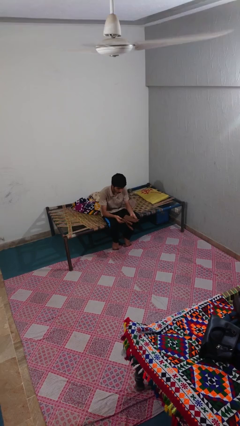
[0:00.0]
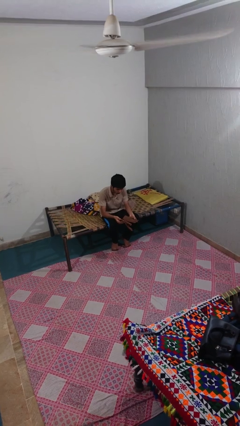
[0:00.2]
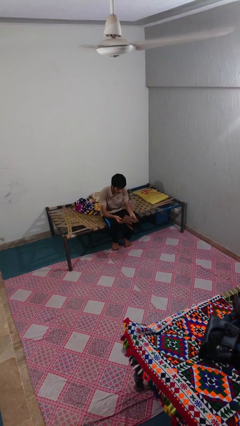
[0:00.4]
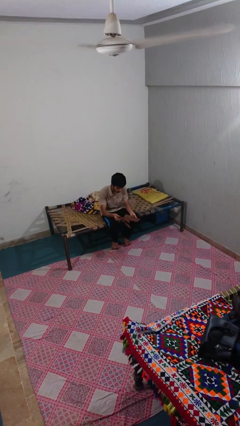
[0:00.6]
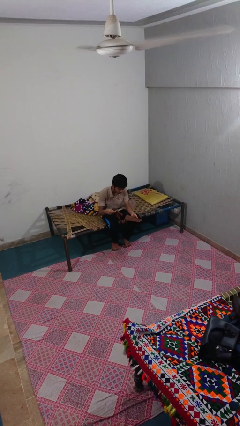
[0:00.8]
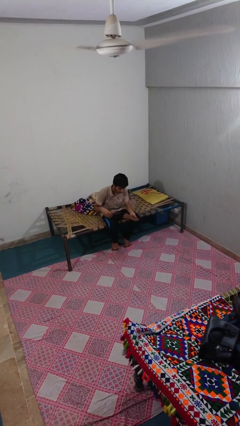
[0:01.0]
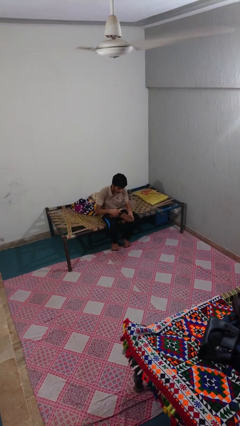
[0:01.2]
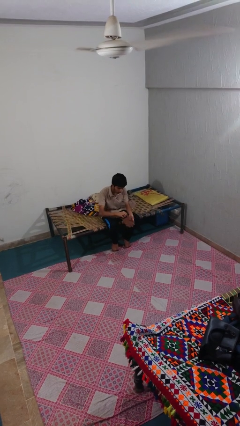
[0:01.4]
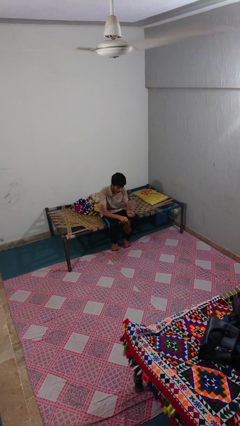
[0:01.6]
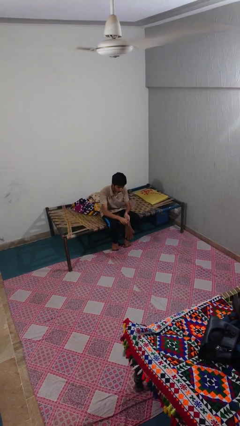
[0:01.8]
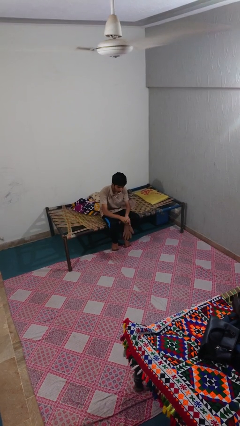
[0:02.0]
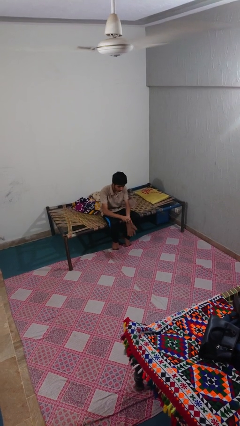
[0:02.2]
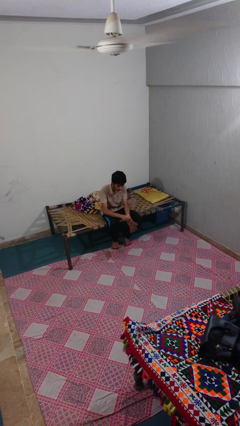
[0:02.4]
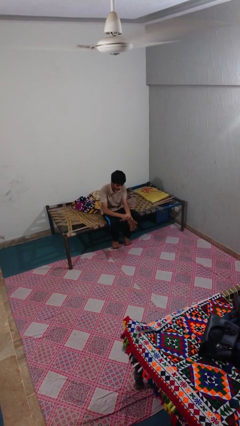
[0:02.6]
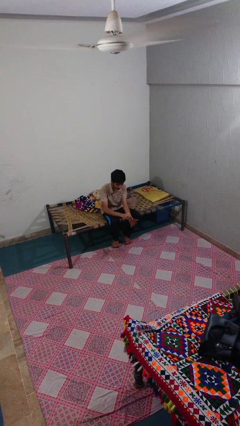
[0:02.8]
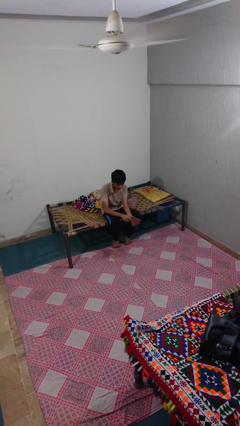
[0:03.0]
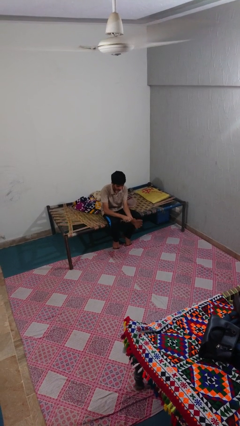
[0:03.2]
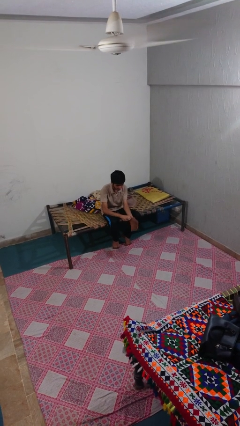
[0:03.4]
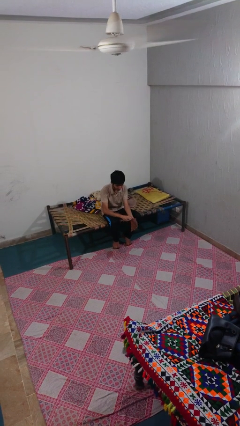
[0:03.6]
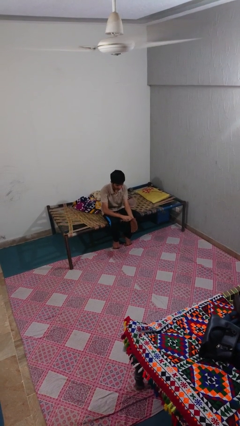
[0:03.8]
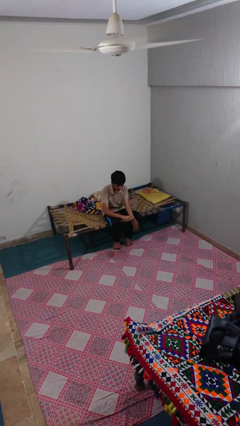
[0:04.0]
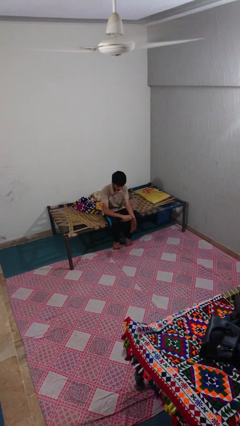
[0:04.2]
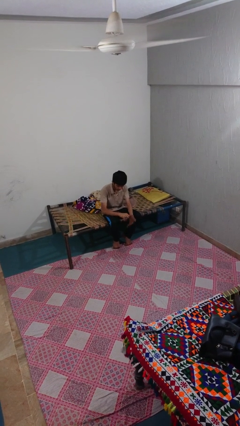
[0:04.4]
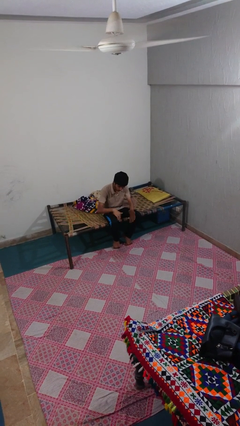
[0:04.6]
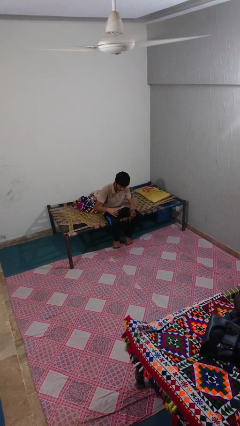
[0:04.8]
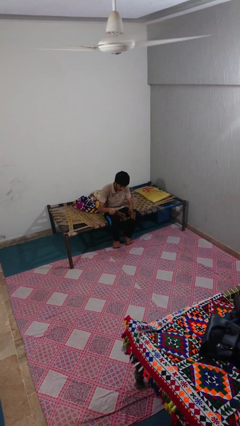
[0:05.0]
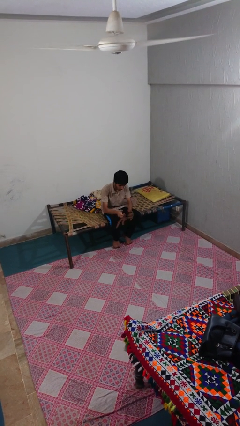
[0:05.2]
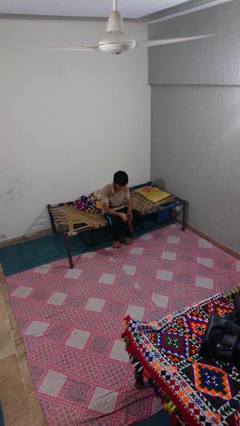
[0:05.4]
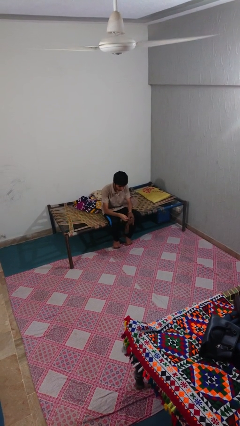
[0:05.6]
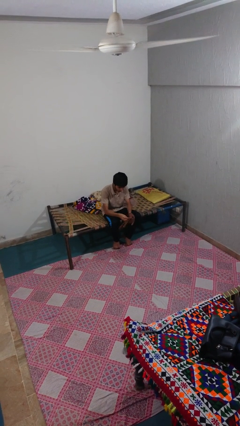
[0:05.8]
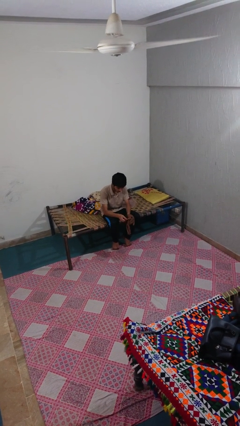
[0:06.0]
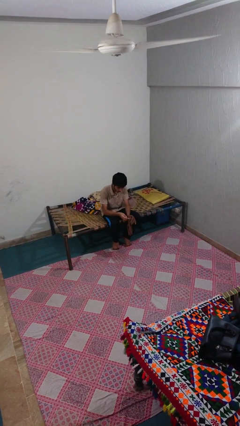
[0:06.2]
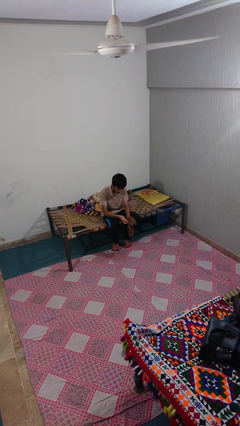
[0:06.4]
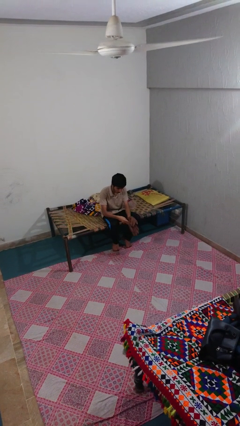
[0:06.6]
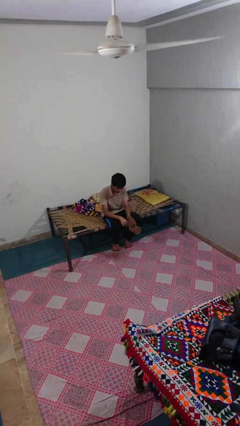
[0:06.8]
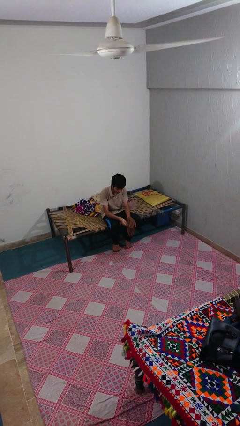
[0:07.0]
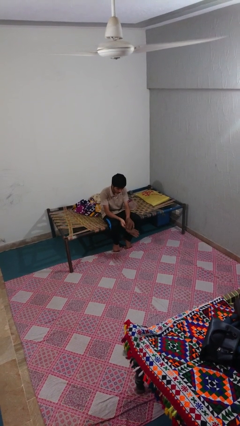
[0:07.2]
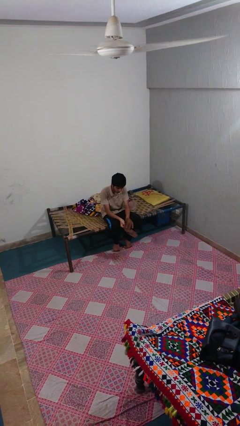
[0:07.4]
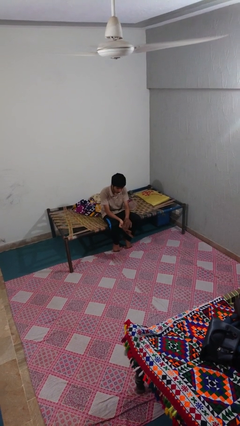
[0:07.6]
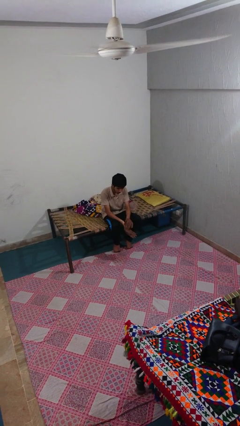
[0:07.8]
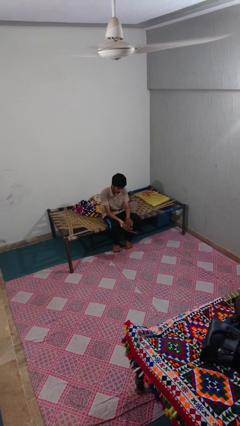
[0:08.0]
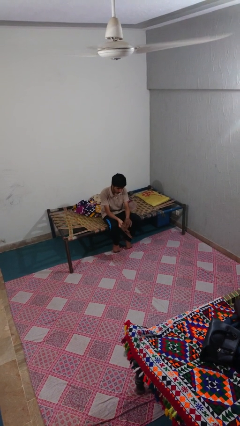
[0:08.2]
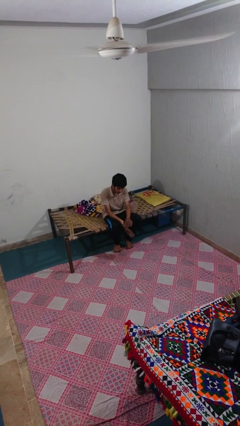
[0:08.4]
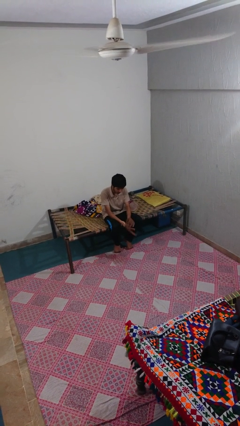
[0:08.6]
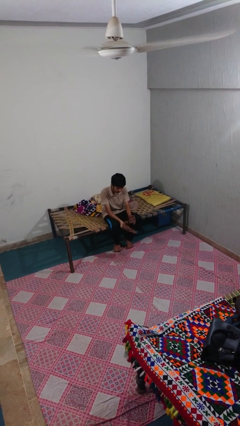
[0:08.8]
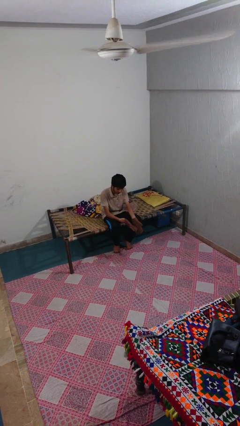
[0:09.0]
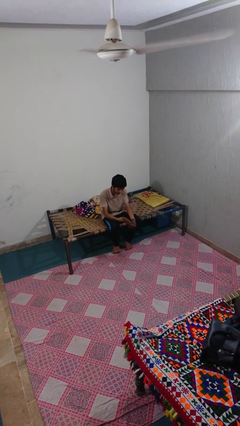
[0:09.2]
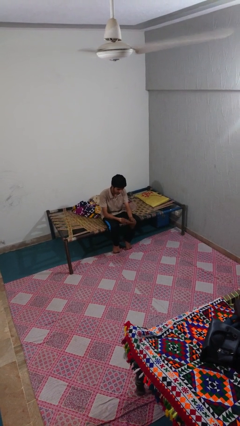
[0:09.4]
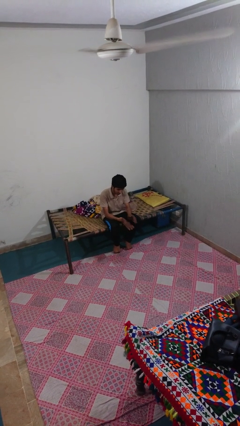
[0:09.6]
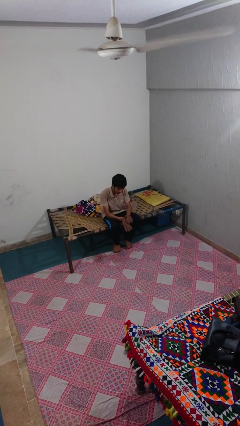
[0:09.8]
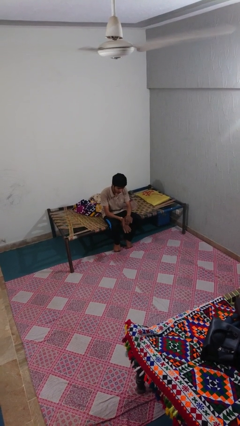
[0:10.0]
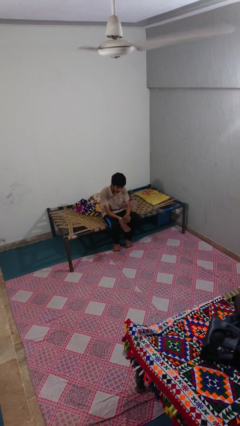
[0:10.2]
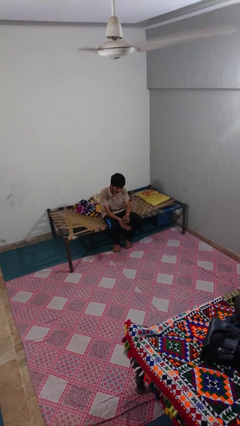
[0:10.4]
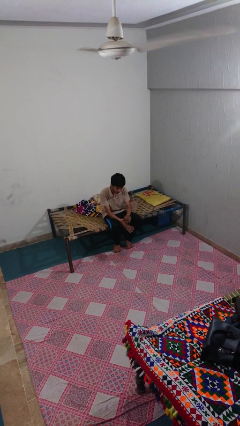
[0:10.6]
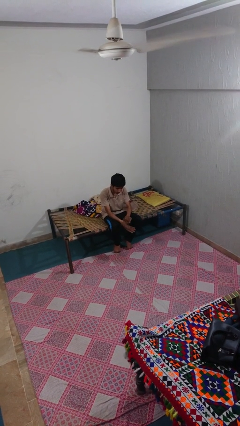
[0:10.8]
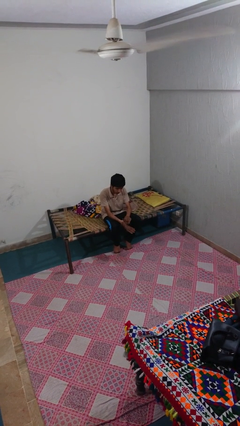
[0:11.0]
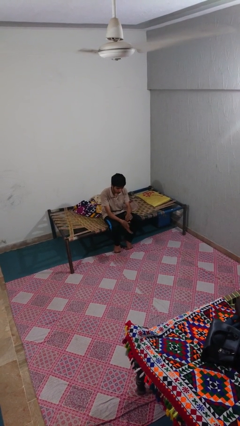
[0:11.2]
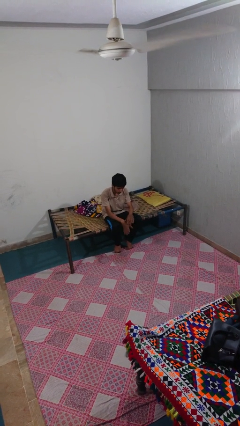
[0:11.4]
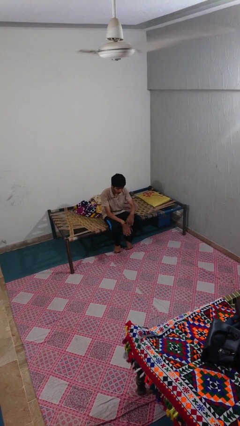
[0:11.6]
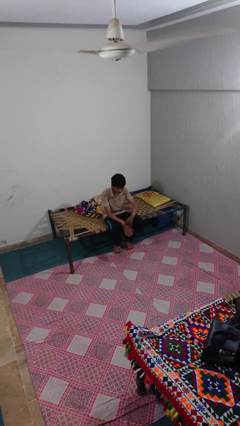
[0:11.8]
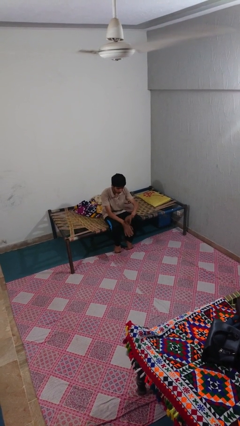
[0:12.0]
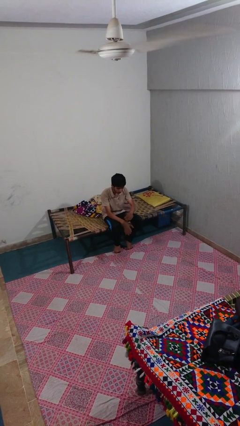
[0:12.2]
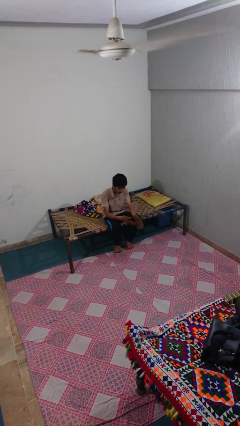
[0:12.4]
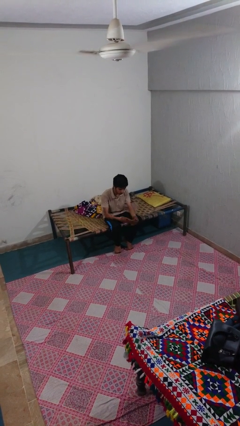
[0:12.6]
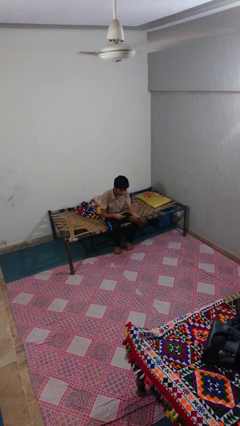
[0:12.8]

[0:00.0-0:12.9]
person puts on gloves

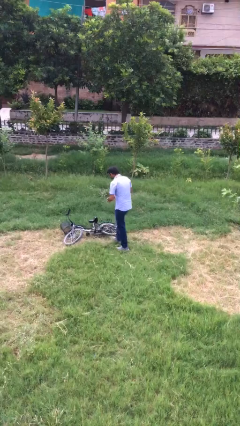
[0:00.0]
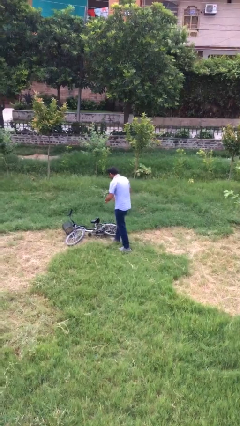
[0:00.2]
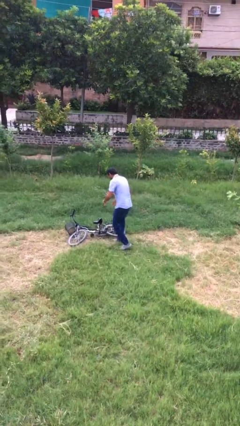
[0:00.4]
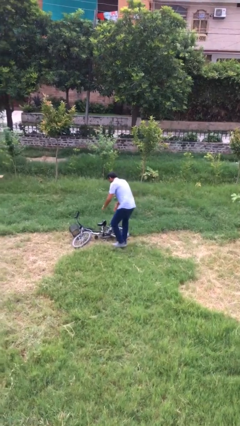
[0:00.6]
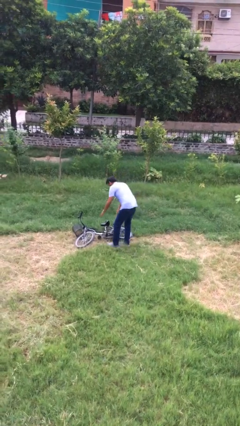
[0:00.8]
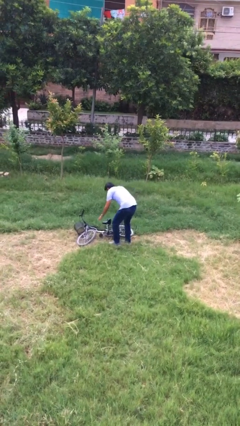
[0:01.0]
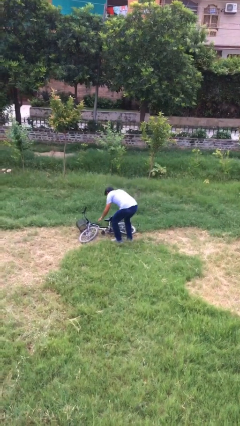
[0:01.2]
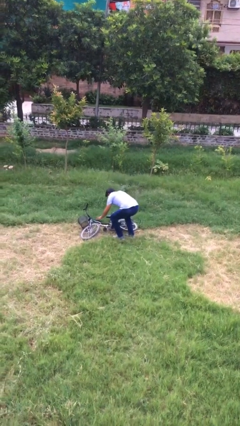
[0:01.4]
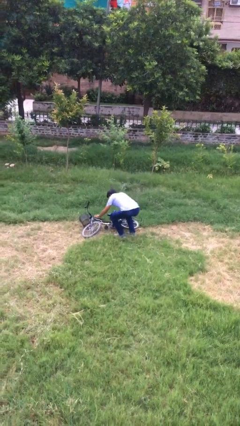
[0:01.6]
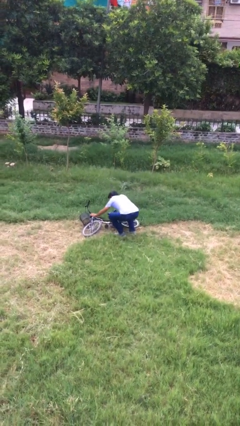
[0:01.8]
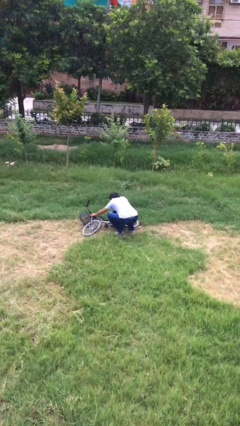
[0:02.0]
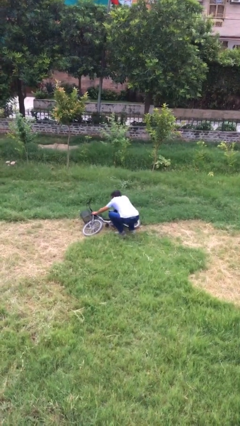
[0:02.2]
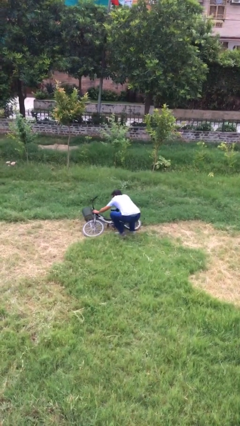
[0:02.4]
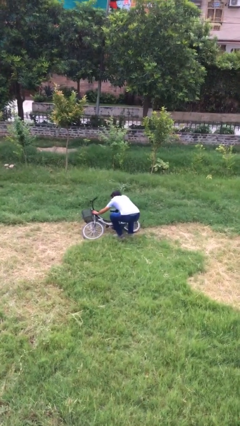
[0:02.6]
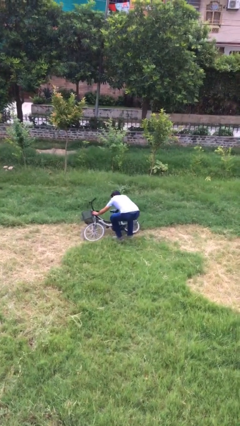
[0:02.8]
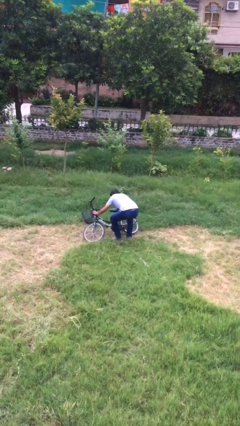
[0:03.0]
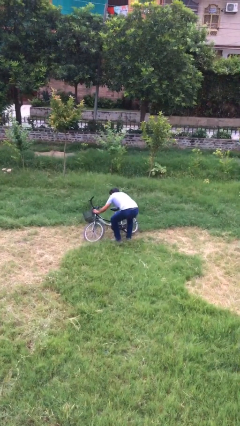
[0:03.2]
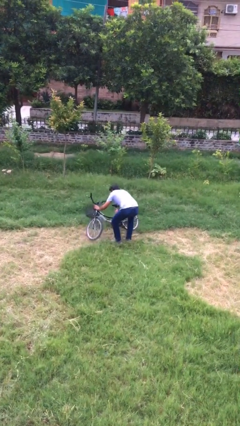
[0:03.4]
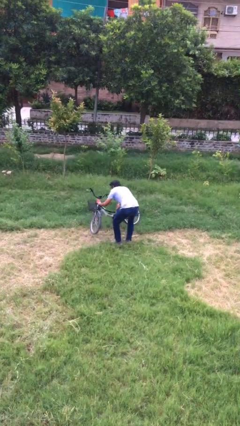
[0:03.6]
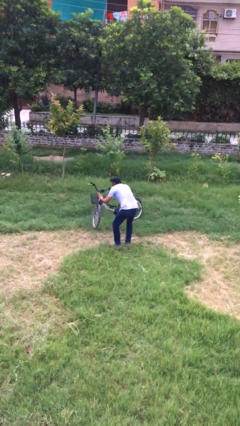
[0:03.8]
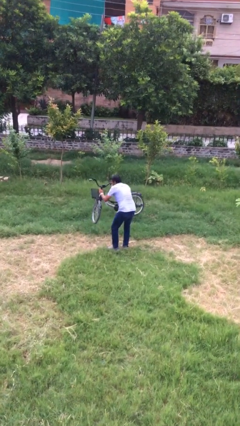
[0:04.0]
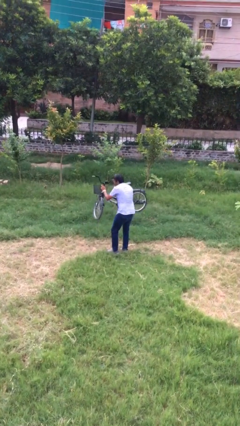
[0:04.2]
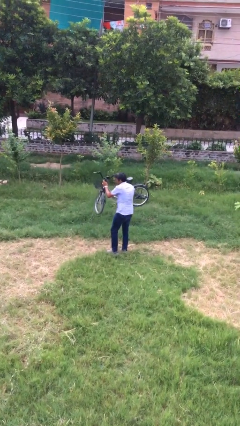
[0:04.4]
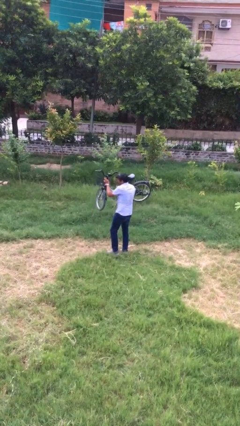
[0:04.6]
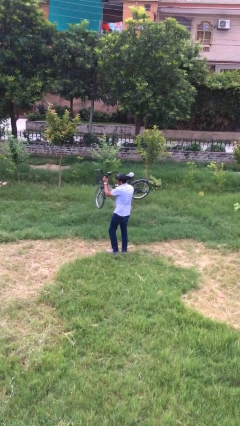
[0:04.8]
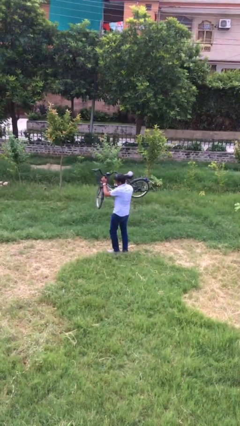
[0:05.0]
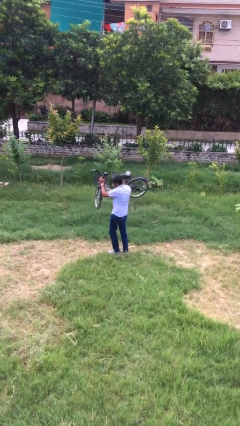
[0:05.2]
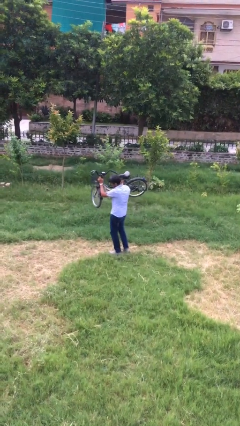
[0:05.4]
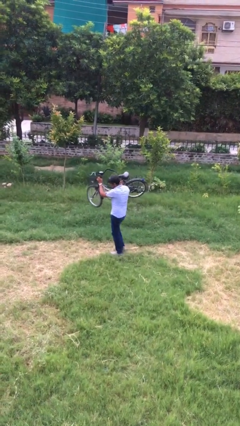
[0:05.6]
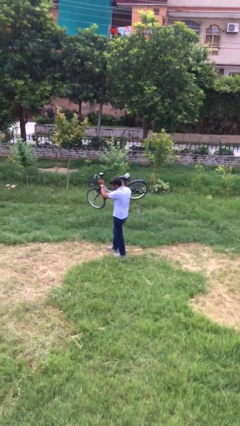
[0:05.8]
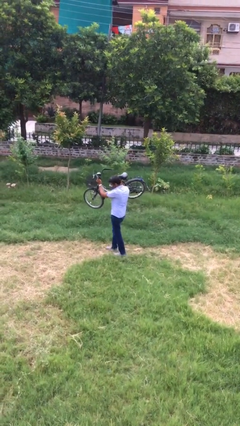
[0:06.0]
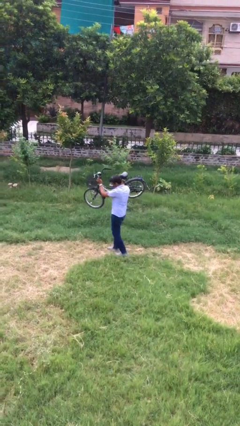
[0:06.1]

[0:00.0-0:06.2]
person picks up object from floor
